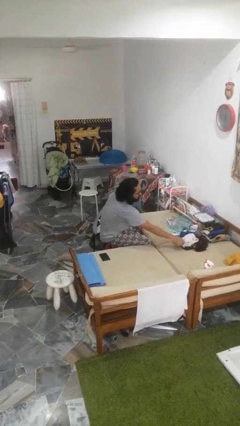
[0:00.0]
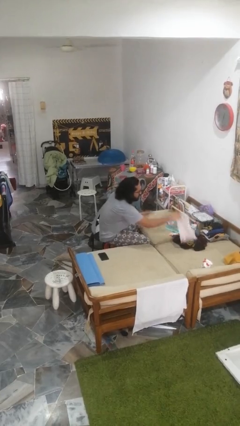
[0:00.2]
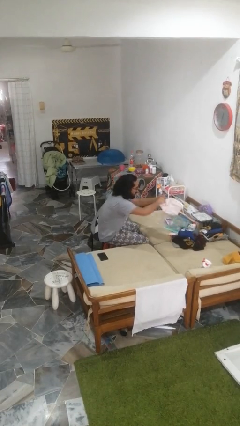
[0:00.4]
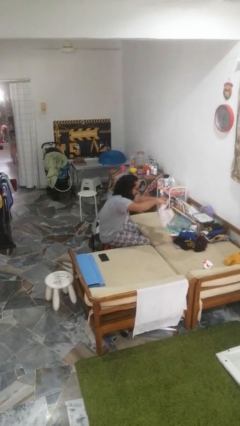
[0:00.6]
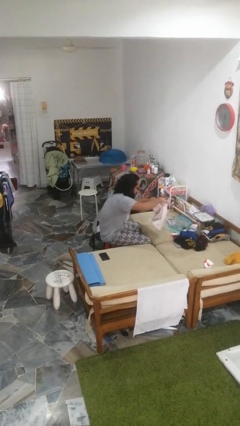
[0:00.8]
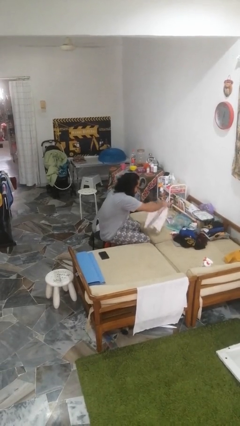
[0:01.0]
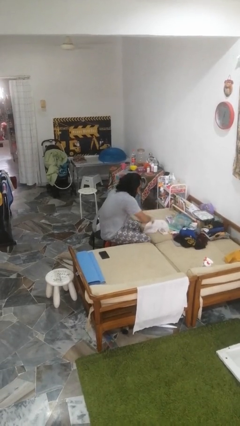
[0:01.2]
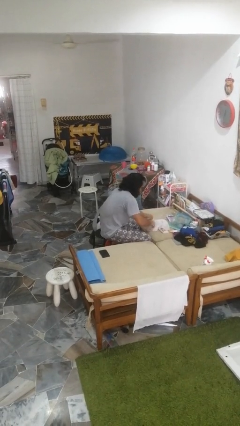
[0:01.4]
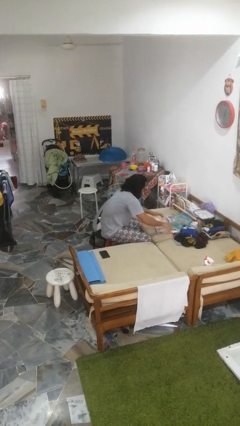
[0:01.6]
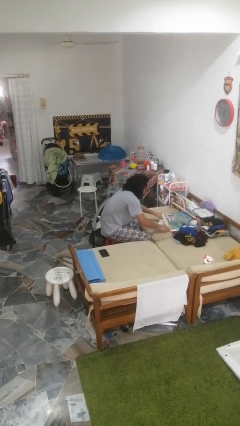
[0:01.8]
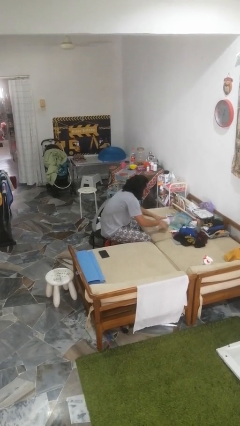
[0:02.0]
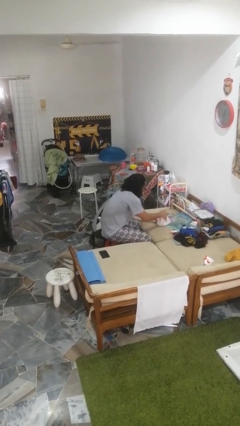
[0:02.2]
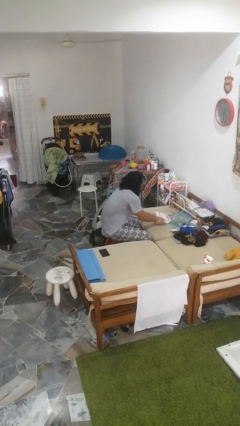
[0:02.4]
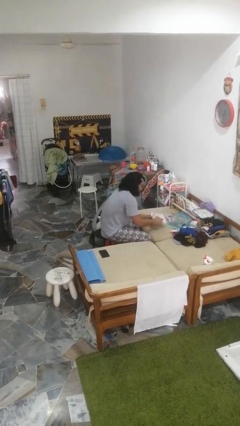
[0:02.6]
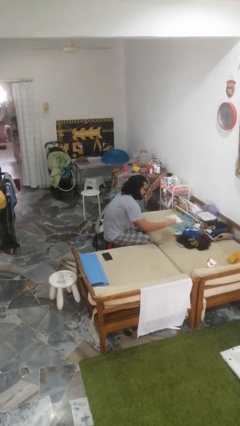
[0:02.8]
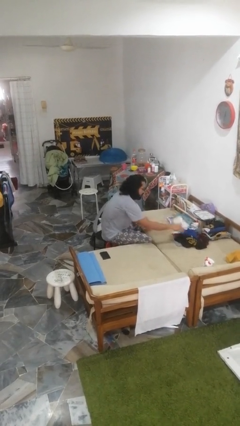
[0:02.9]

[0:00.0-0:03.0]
person folds pants

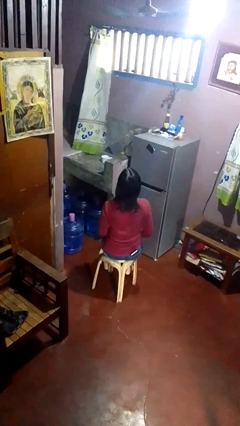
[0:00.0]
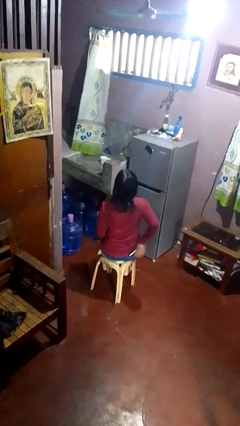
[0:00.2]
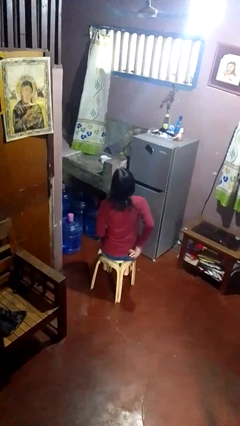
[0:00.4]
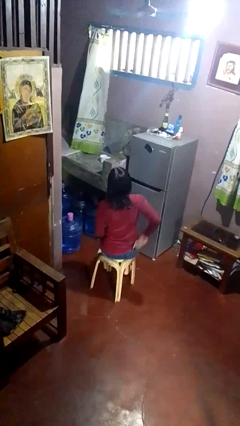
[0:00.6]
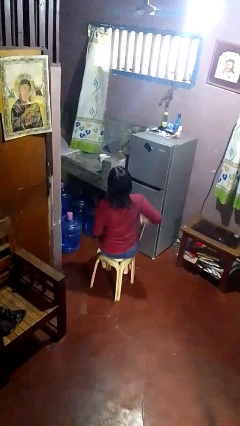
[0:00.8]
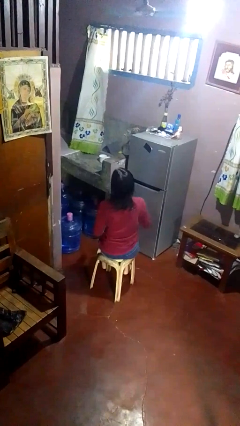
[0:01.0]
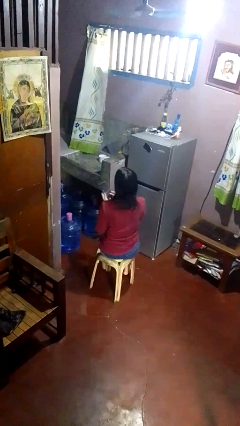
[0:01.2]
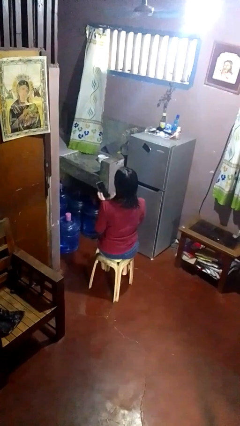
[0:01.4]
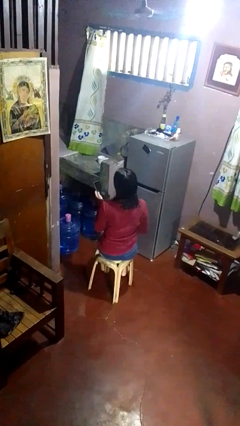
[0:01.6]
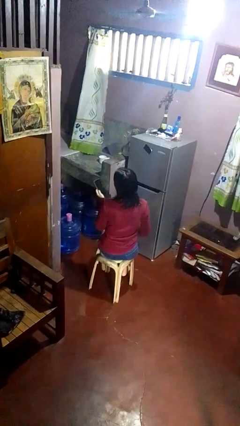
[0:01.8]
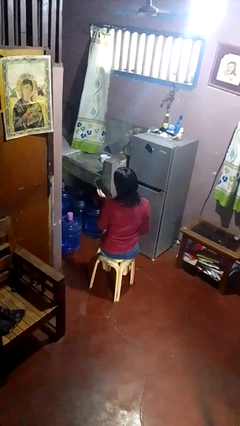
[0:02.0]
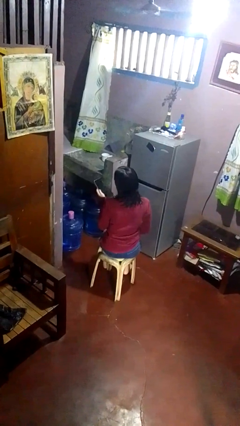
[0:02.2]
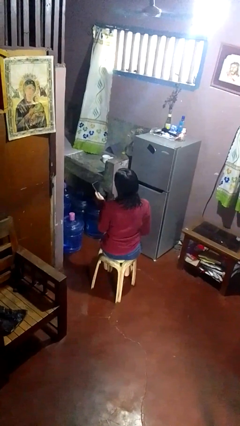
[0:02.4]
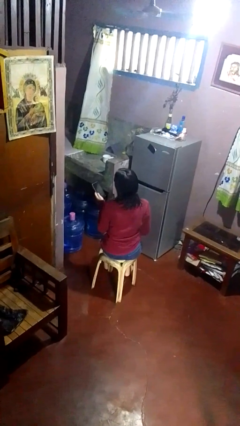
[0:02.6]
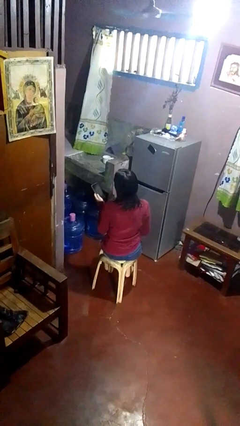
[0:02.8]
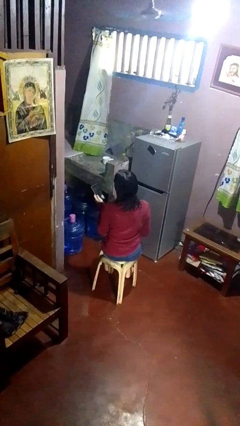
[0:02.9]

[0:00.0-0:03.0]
person takes phone from pocket

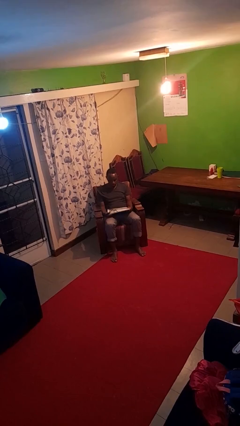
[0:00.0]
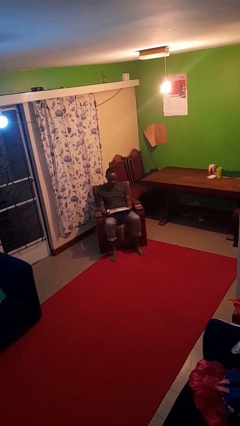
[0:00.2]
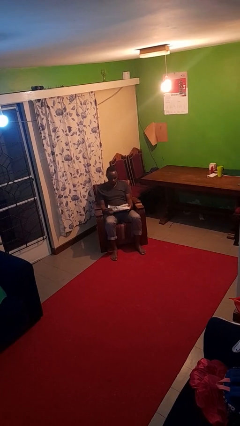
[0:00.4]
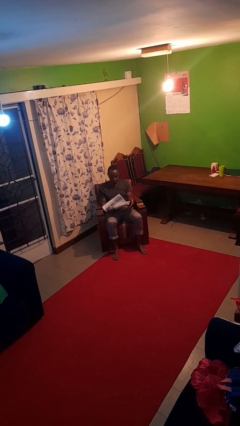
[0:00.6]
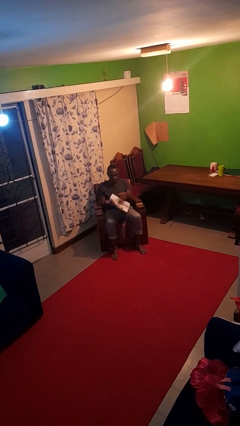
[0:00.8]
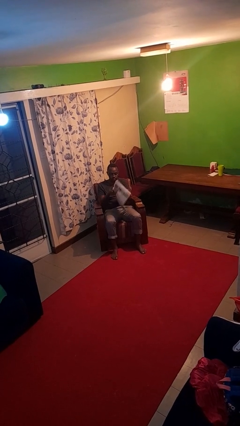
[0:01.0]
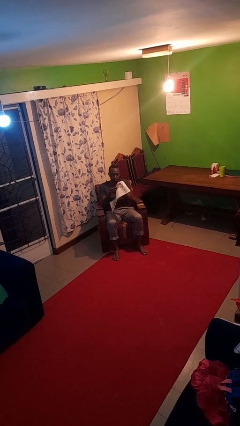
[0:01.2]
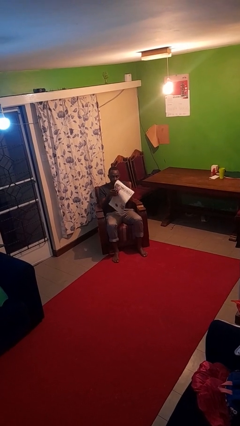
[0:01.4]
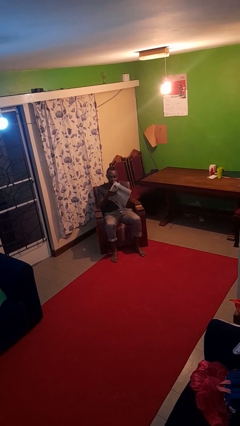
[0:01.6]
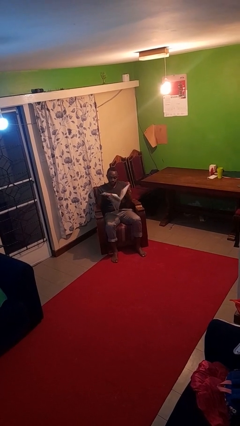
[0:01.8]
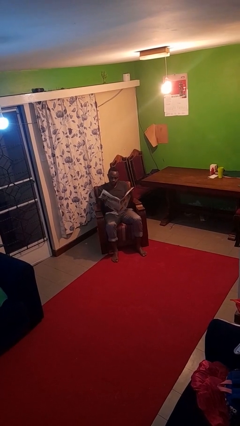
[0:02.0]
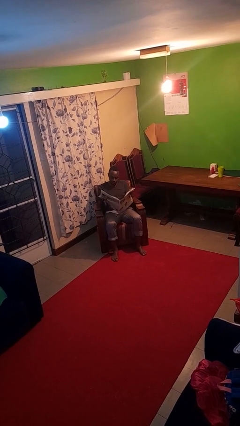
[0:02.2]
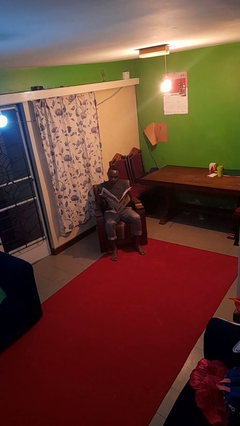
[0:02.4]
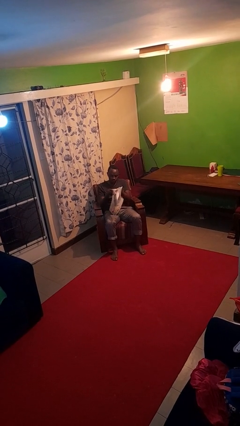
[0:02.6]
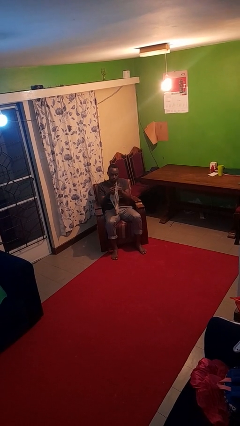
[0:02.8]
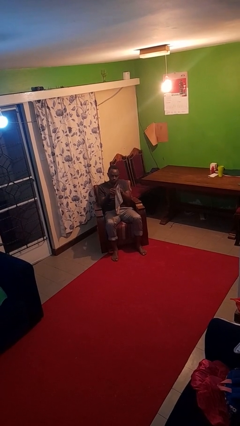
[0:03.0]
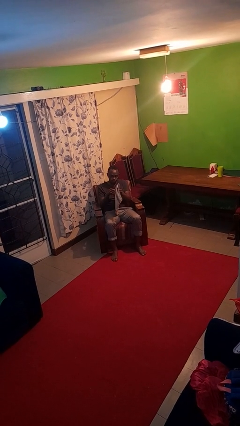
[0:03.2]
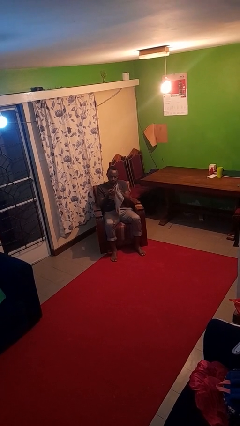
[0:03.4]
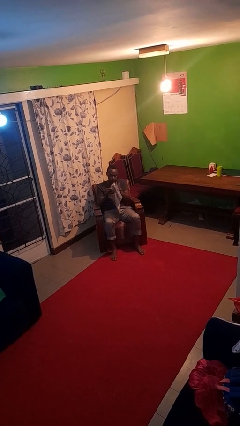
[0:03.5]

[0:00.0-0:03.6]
person reads newspaper

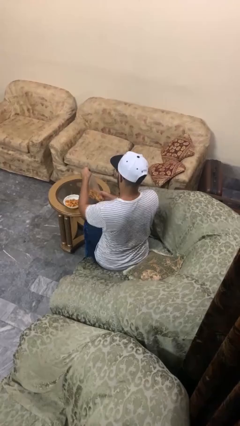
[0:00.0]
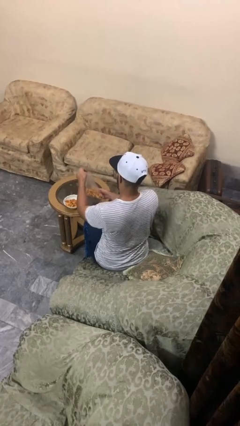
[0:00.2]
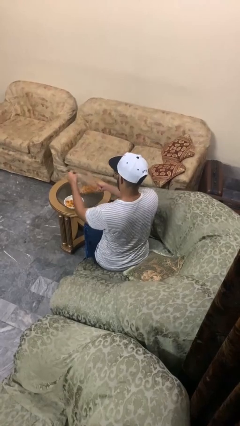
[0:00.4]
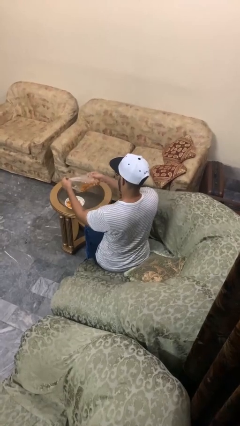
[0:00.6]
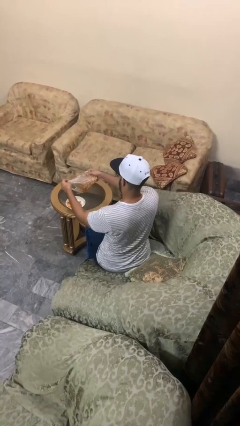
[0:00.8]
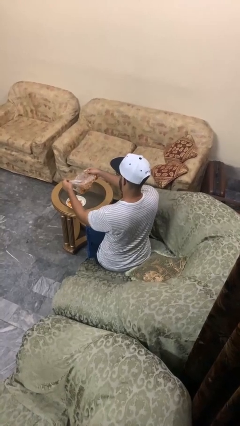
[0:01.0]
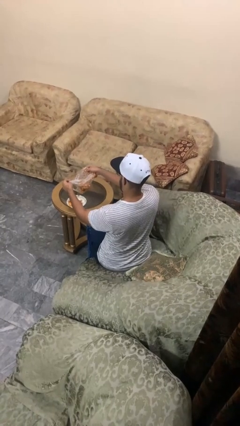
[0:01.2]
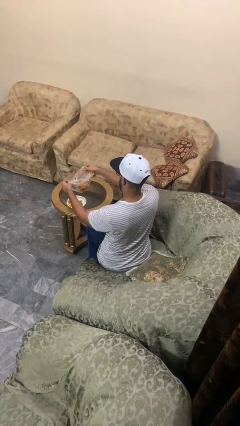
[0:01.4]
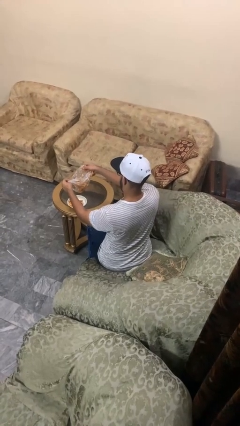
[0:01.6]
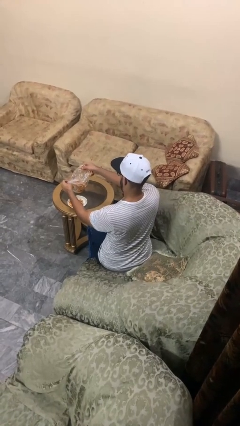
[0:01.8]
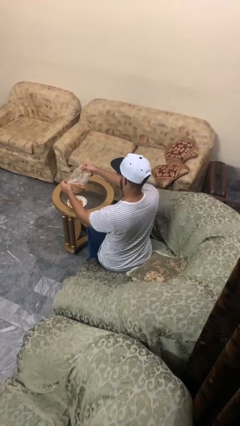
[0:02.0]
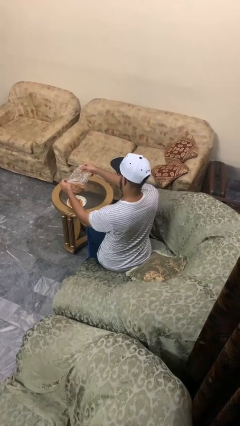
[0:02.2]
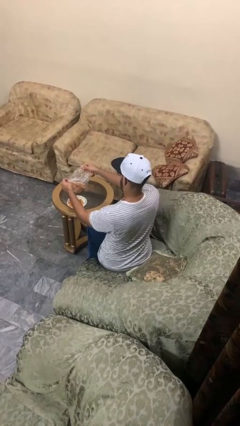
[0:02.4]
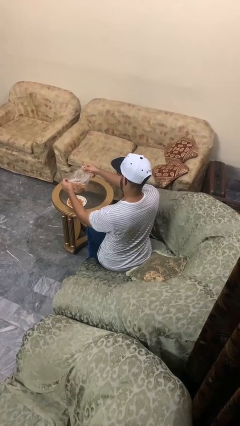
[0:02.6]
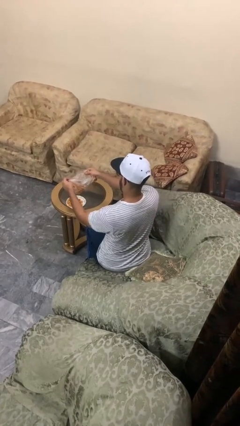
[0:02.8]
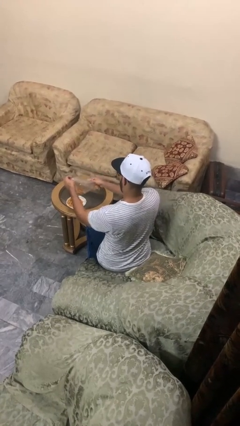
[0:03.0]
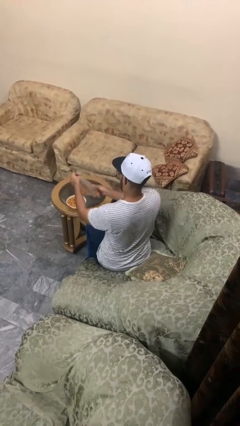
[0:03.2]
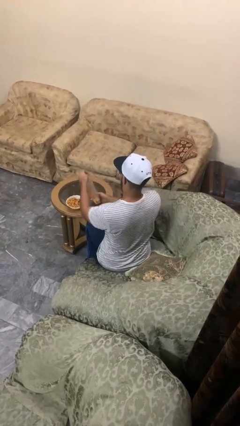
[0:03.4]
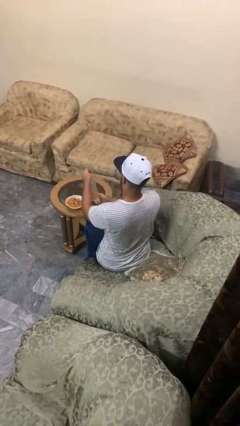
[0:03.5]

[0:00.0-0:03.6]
person pours into bowl

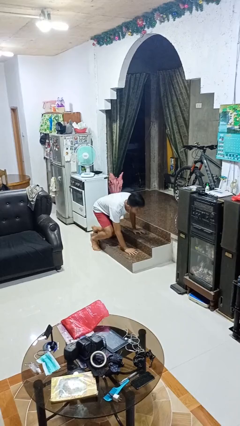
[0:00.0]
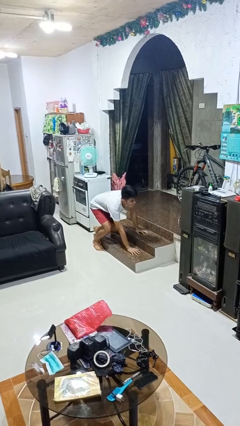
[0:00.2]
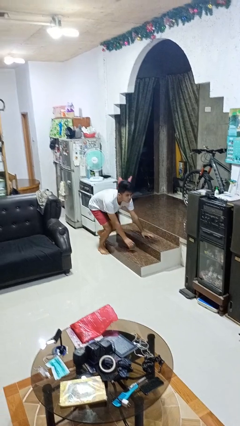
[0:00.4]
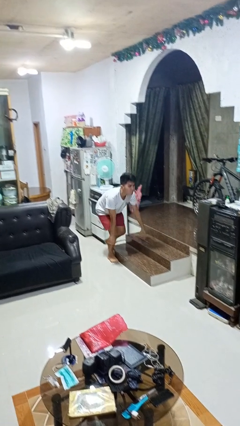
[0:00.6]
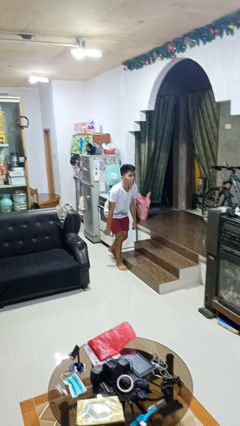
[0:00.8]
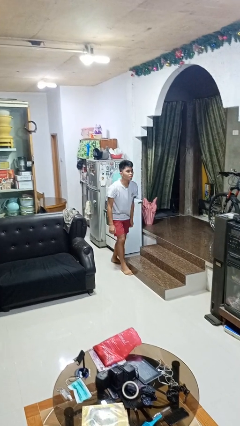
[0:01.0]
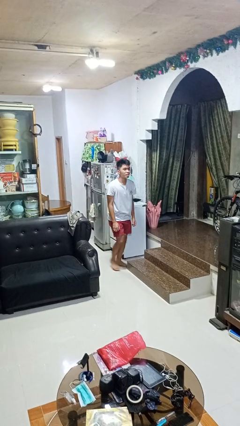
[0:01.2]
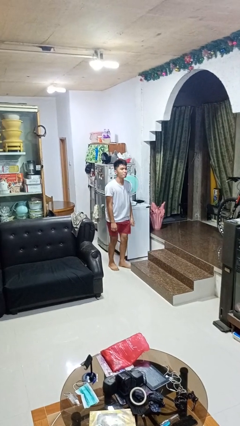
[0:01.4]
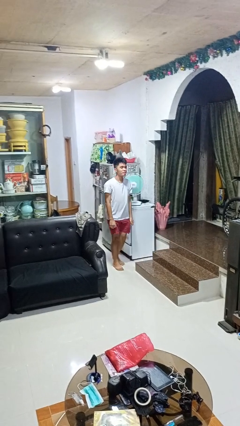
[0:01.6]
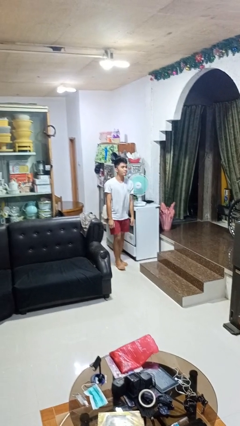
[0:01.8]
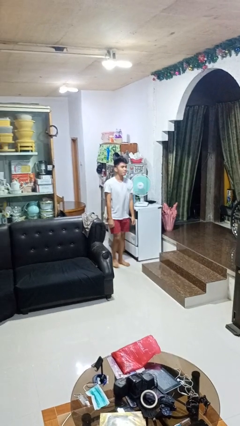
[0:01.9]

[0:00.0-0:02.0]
person stands up from floor

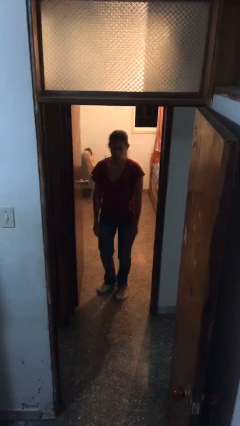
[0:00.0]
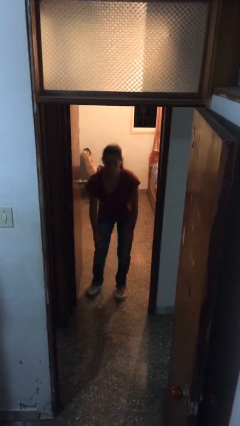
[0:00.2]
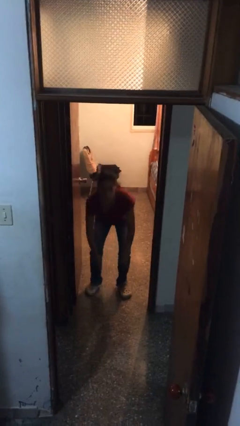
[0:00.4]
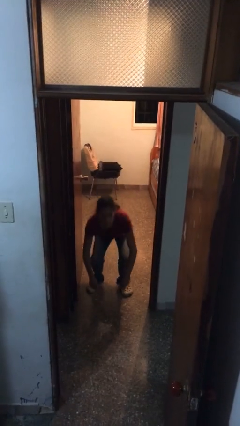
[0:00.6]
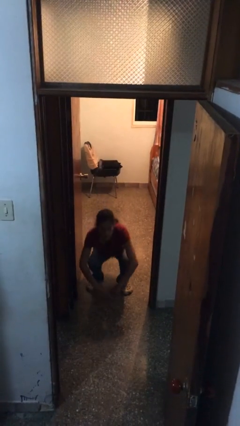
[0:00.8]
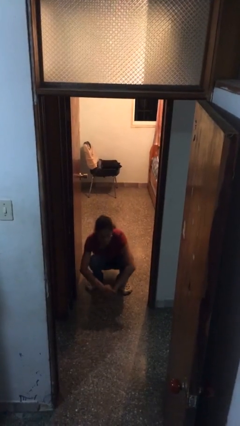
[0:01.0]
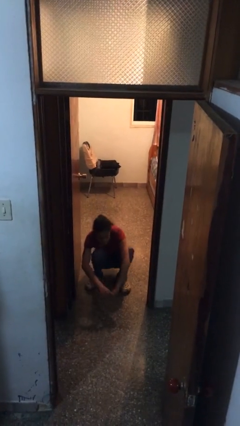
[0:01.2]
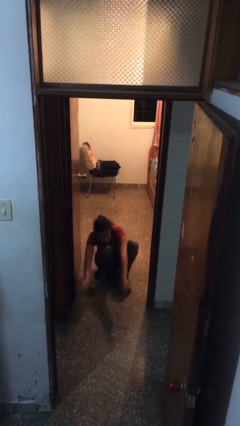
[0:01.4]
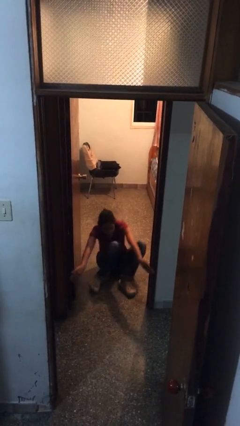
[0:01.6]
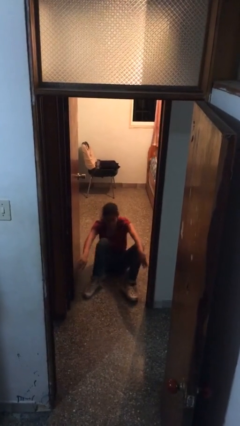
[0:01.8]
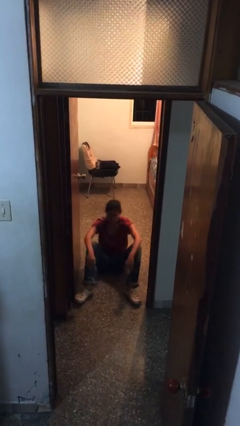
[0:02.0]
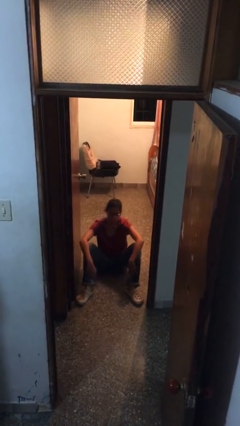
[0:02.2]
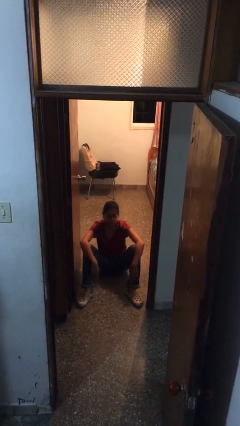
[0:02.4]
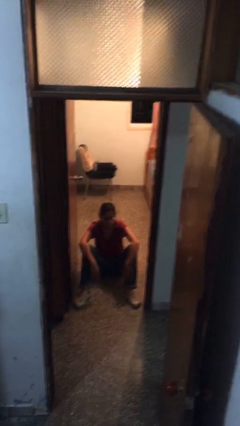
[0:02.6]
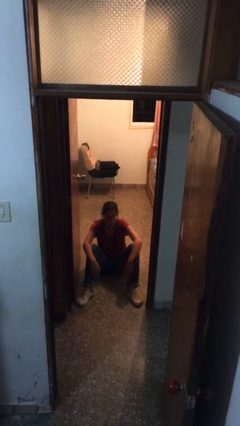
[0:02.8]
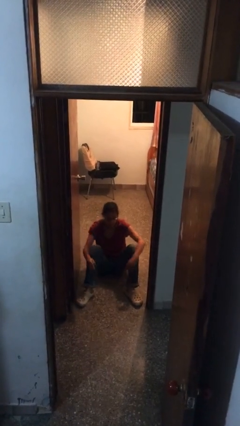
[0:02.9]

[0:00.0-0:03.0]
person sits down
